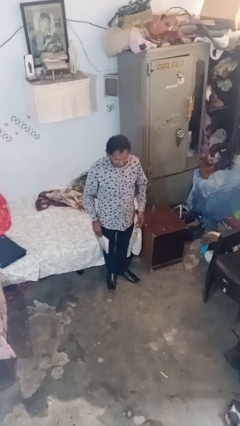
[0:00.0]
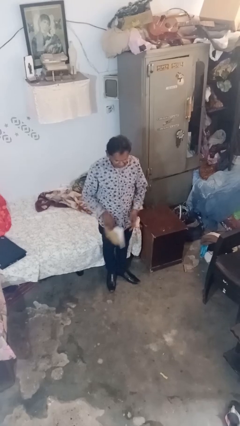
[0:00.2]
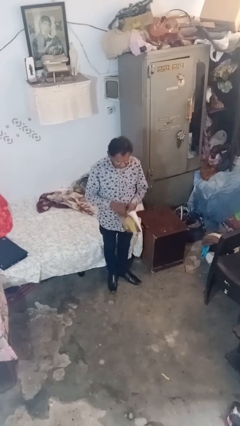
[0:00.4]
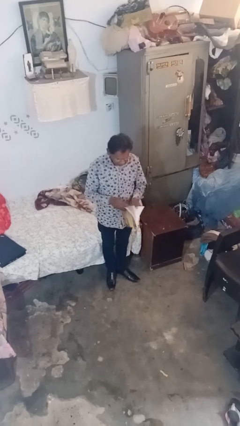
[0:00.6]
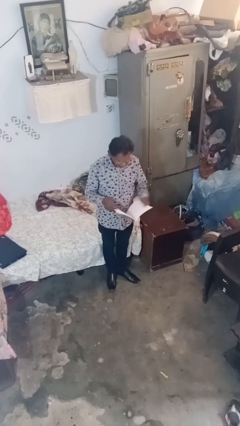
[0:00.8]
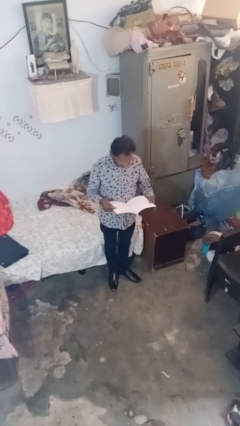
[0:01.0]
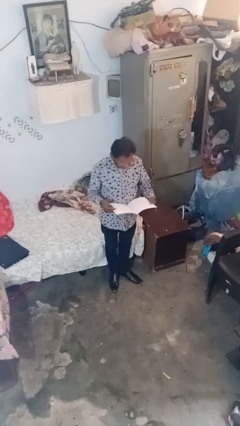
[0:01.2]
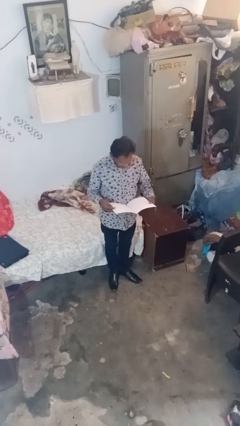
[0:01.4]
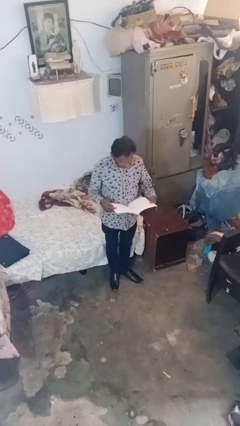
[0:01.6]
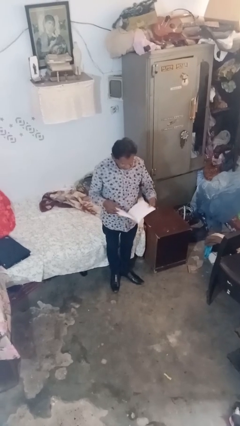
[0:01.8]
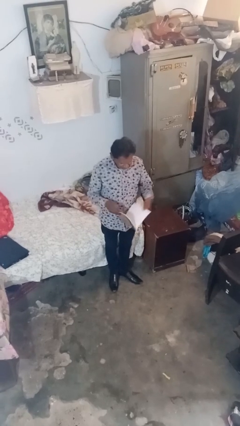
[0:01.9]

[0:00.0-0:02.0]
person reads document

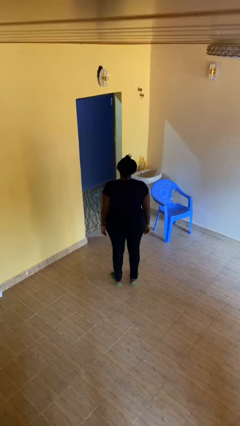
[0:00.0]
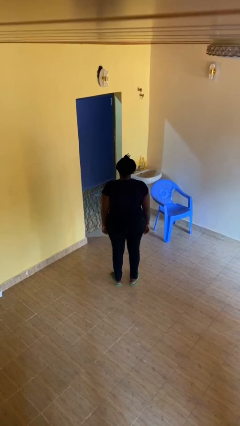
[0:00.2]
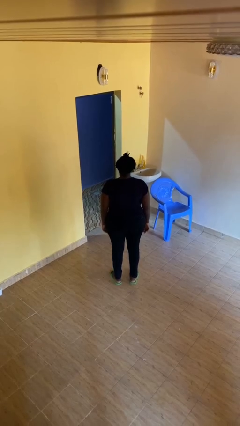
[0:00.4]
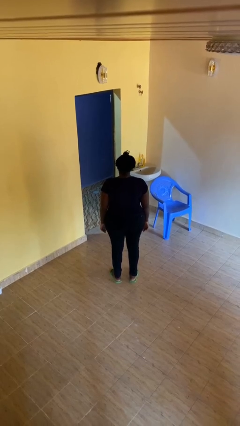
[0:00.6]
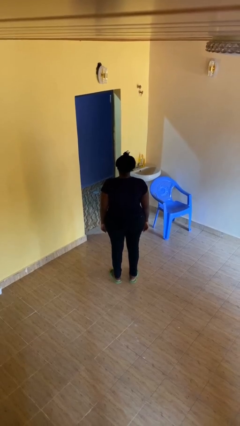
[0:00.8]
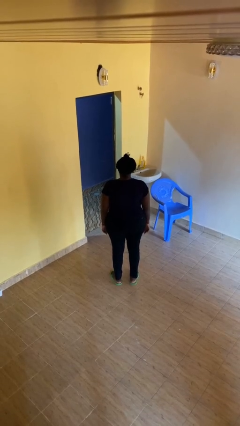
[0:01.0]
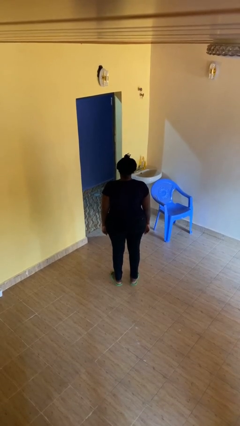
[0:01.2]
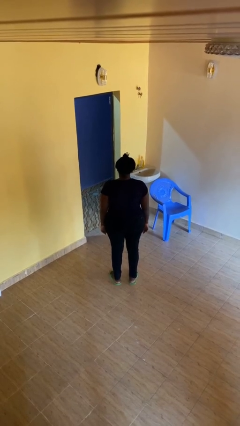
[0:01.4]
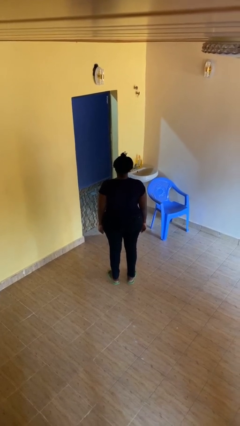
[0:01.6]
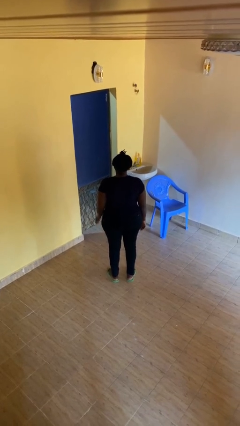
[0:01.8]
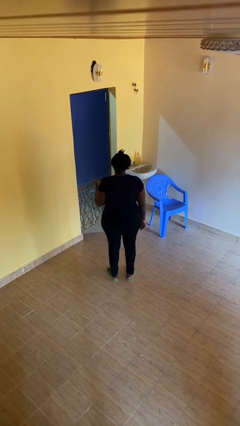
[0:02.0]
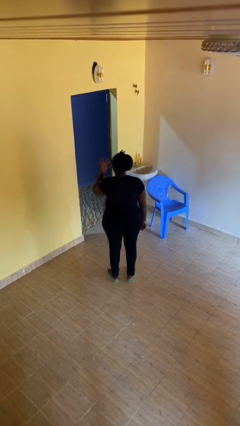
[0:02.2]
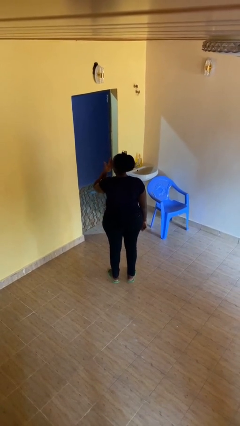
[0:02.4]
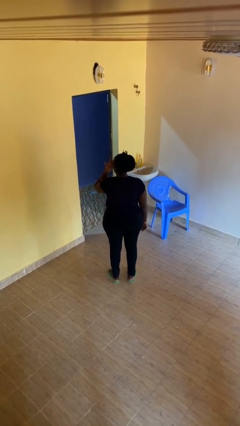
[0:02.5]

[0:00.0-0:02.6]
person licks fingers

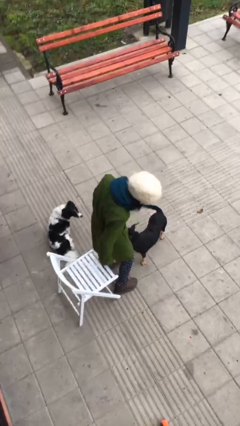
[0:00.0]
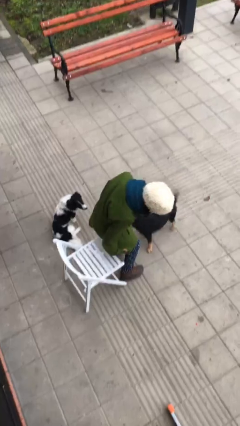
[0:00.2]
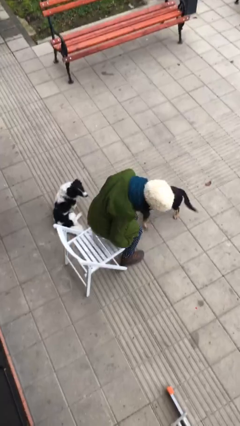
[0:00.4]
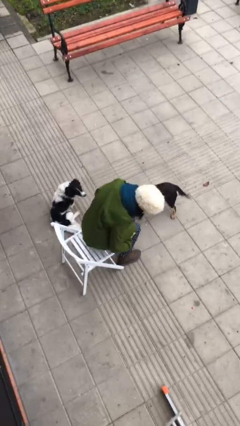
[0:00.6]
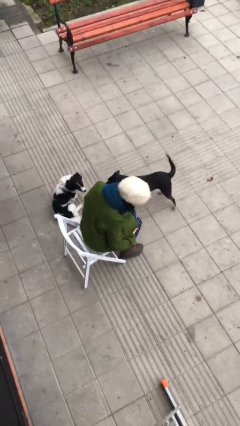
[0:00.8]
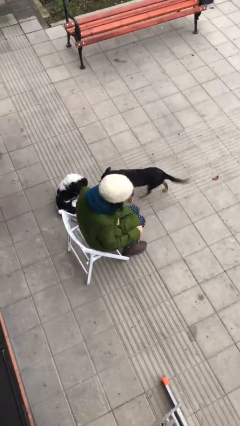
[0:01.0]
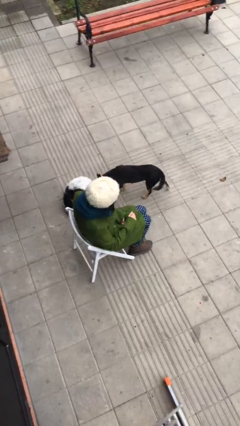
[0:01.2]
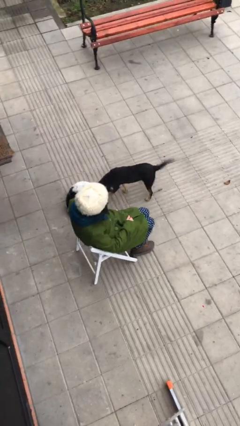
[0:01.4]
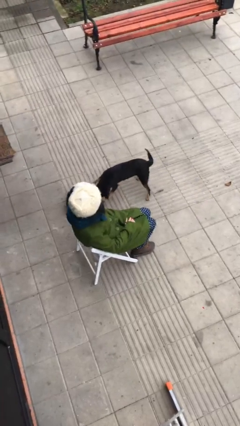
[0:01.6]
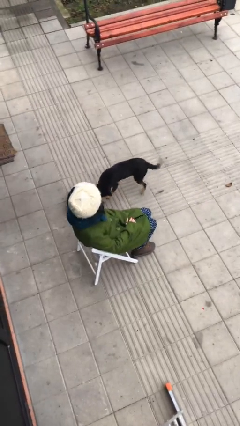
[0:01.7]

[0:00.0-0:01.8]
person sits down

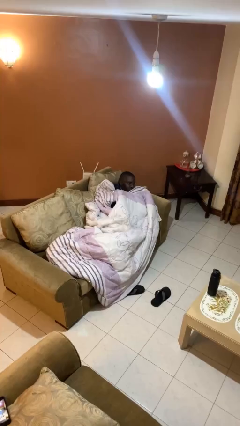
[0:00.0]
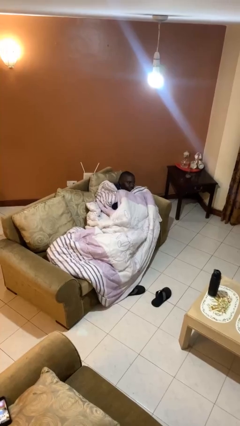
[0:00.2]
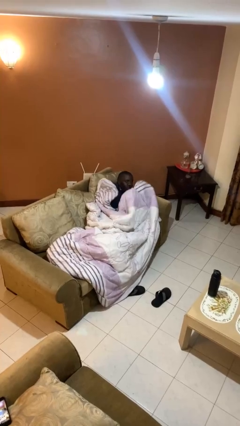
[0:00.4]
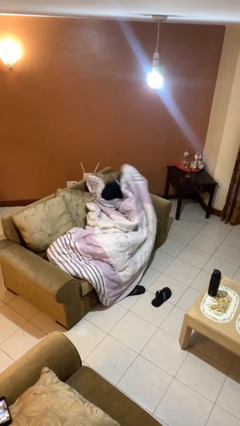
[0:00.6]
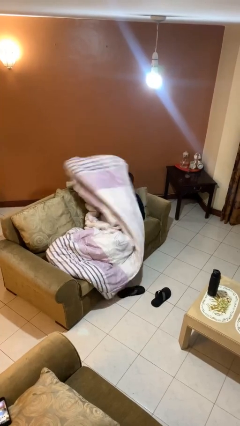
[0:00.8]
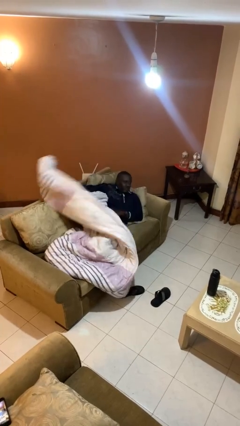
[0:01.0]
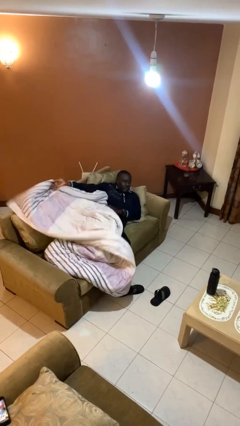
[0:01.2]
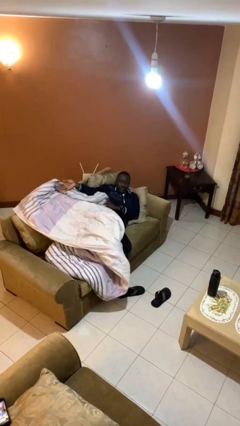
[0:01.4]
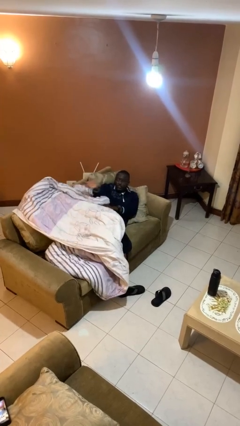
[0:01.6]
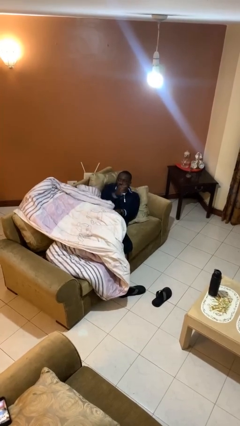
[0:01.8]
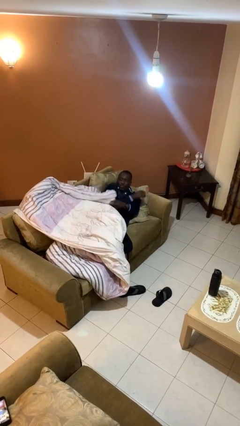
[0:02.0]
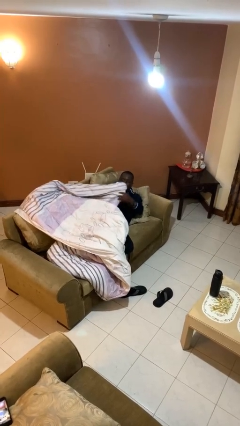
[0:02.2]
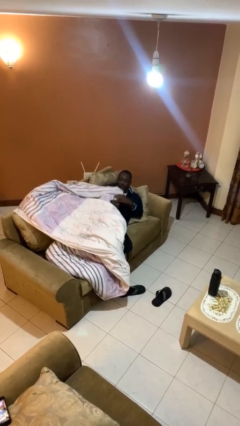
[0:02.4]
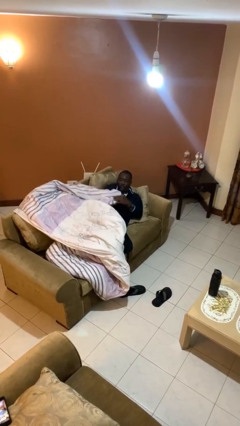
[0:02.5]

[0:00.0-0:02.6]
person uncovers with blanket

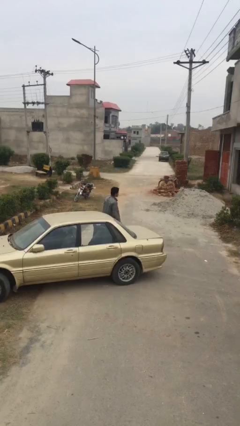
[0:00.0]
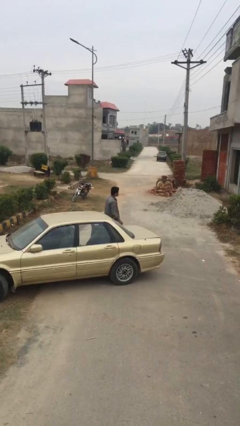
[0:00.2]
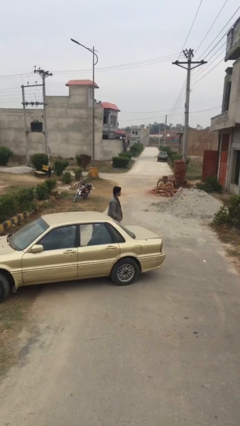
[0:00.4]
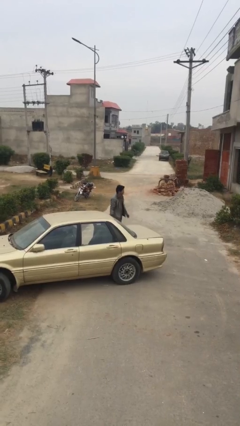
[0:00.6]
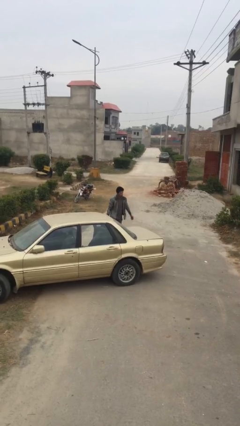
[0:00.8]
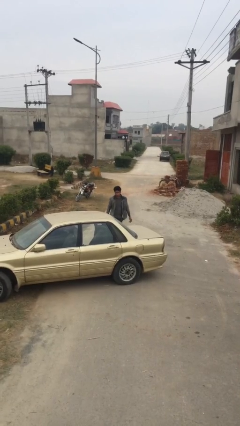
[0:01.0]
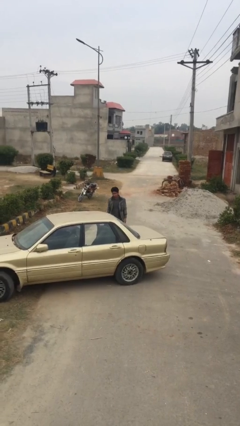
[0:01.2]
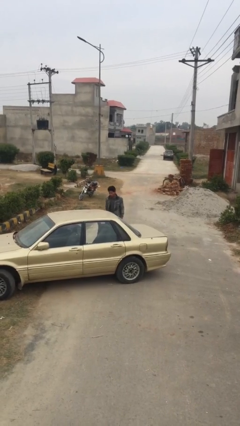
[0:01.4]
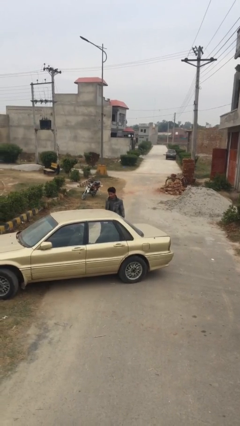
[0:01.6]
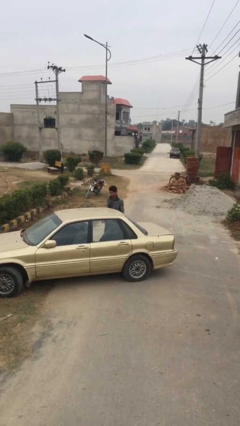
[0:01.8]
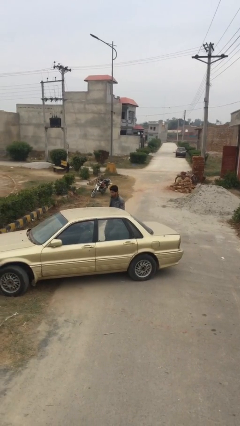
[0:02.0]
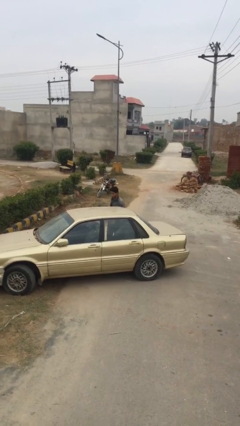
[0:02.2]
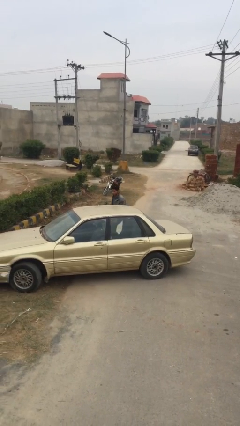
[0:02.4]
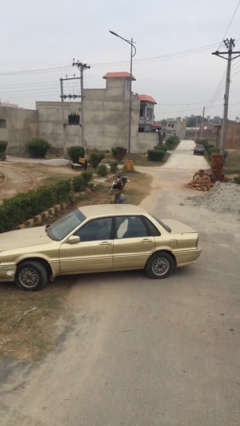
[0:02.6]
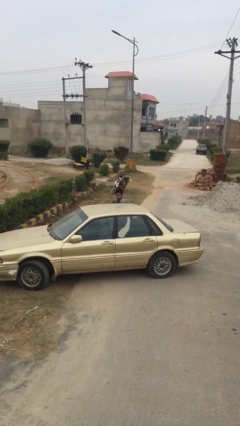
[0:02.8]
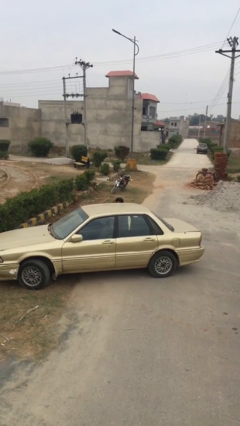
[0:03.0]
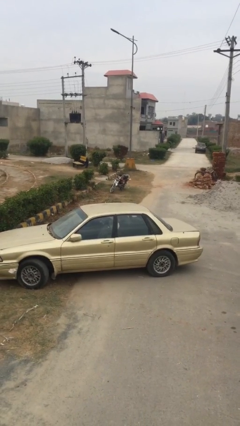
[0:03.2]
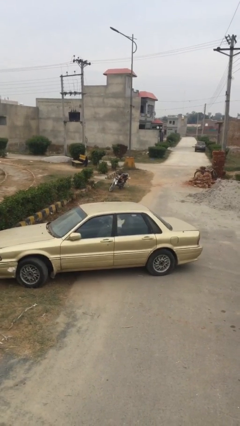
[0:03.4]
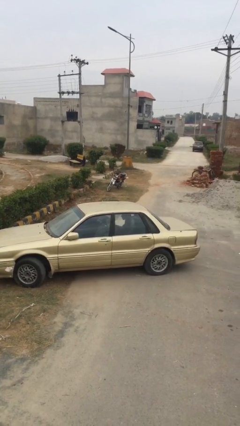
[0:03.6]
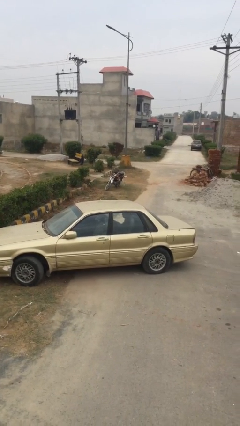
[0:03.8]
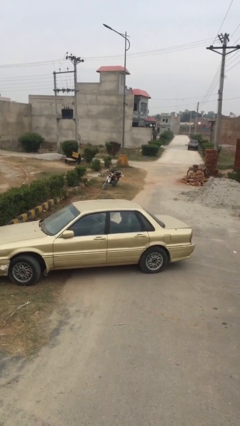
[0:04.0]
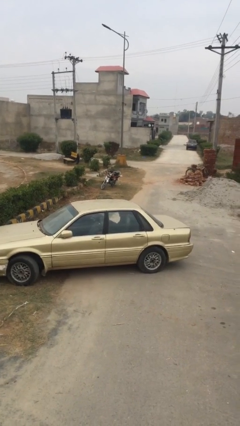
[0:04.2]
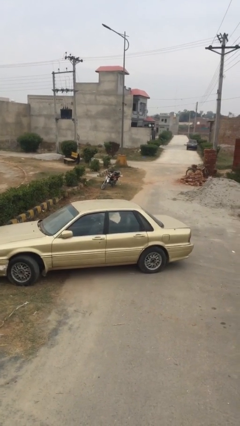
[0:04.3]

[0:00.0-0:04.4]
person enters car

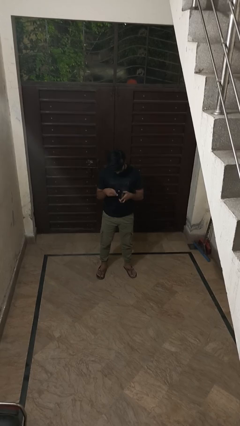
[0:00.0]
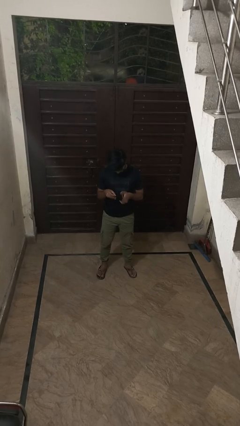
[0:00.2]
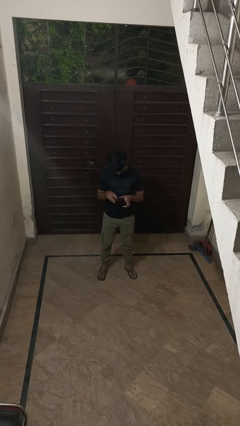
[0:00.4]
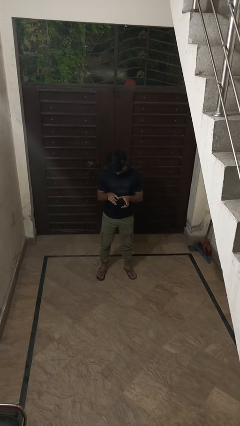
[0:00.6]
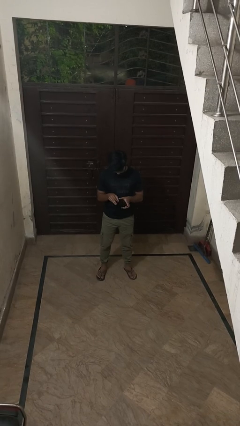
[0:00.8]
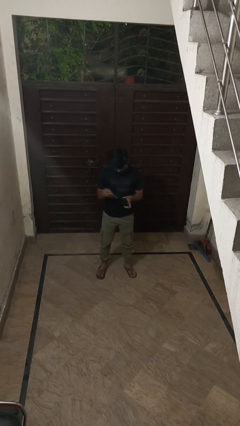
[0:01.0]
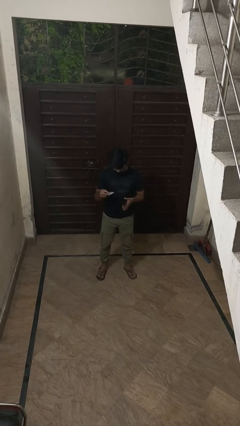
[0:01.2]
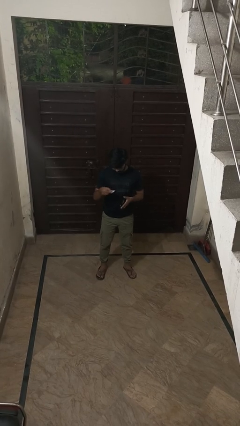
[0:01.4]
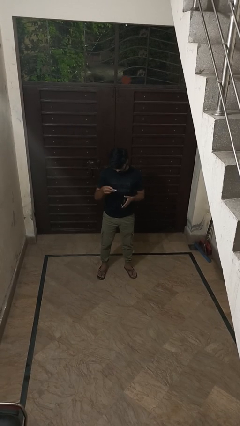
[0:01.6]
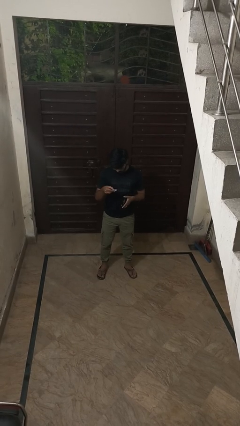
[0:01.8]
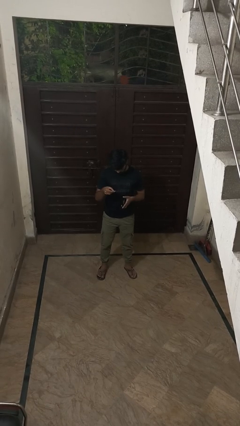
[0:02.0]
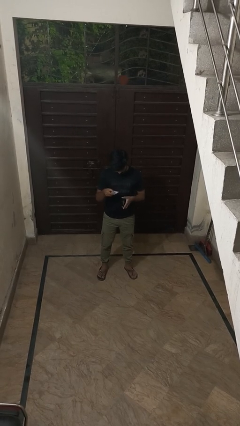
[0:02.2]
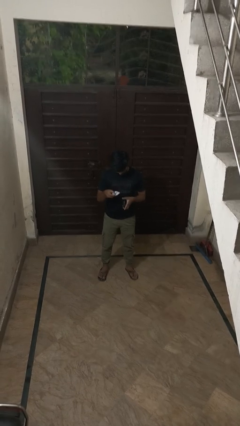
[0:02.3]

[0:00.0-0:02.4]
person takes object from purse

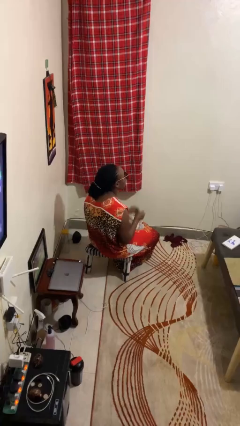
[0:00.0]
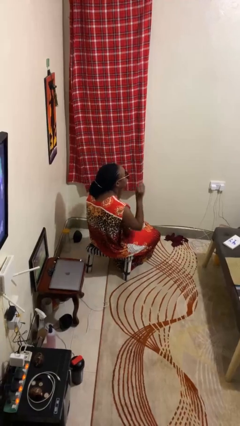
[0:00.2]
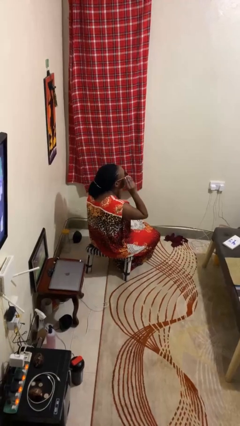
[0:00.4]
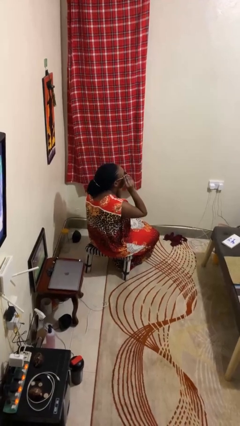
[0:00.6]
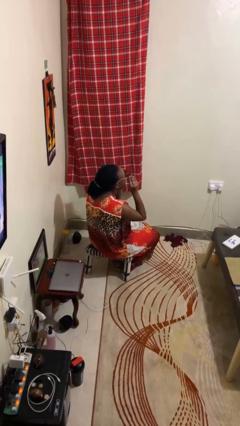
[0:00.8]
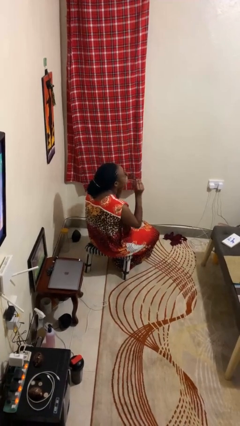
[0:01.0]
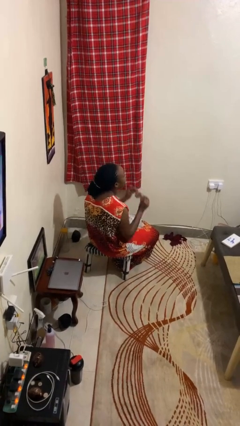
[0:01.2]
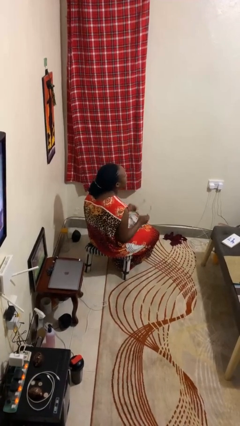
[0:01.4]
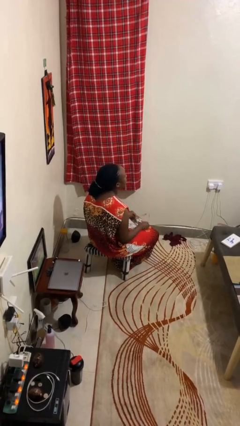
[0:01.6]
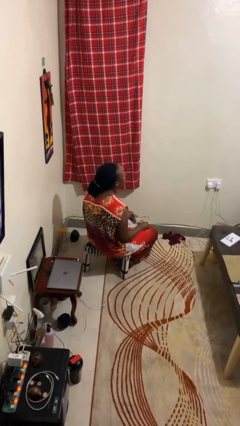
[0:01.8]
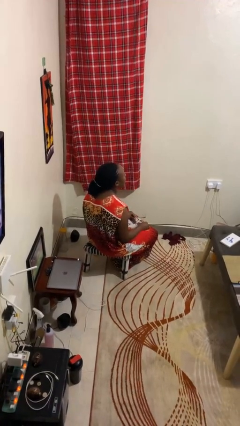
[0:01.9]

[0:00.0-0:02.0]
person takes off sunglasses
